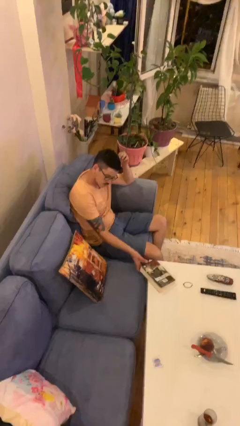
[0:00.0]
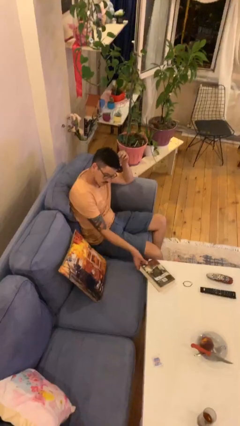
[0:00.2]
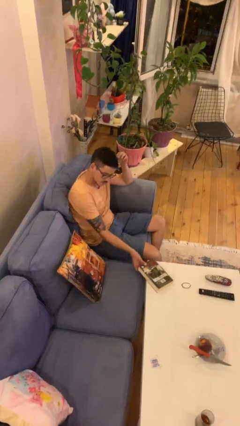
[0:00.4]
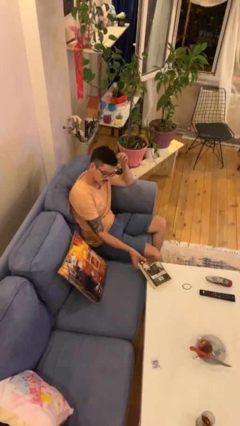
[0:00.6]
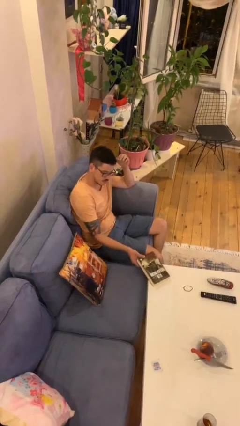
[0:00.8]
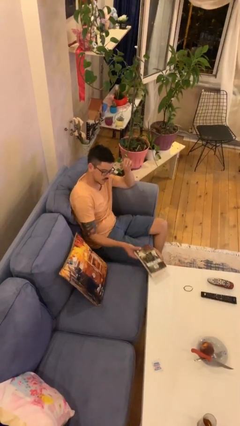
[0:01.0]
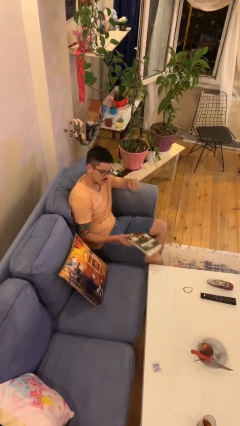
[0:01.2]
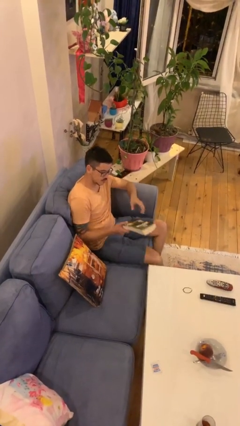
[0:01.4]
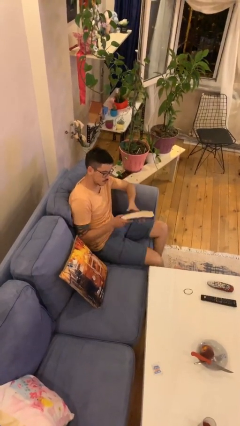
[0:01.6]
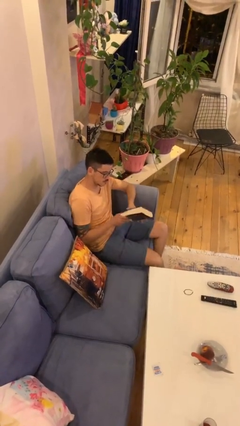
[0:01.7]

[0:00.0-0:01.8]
person picks up object from table

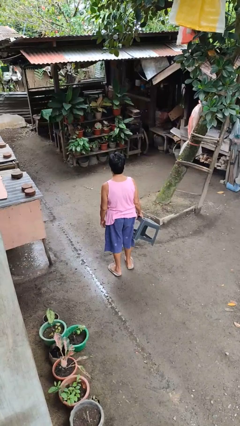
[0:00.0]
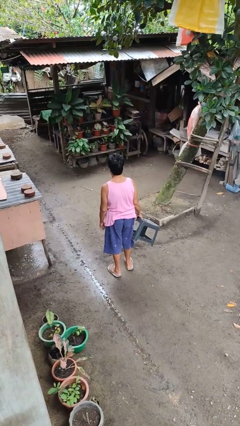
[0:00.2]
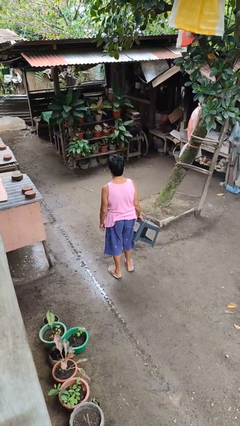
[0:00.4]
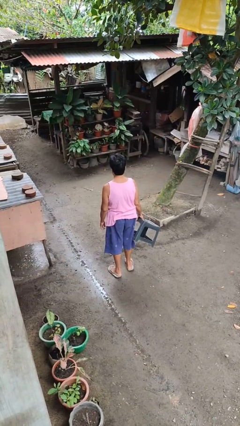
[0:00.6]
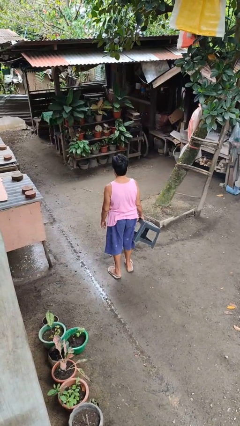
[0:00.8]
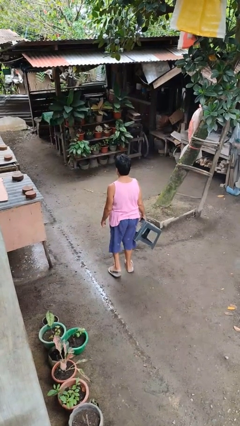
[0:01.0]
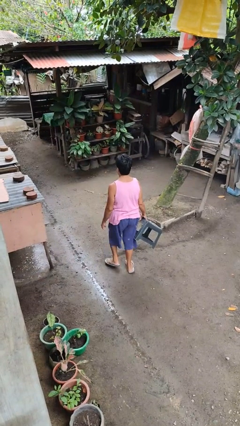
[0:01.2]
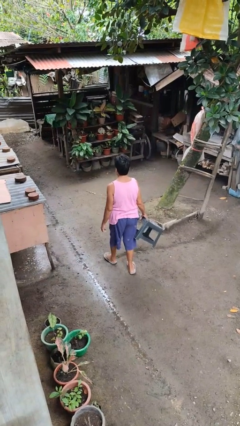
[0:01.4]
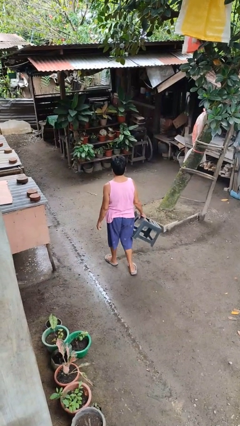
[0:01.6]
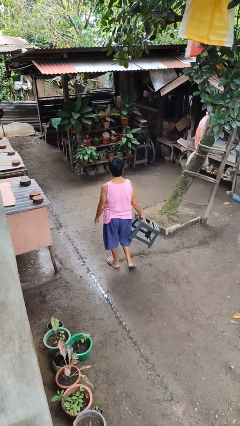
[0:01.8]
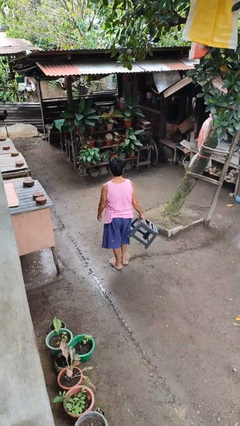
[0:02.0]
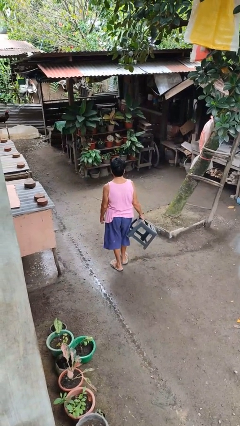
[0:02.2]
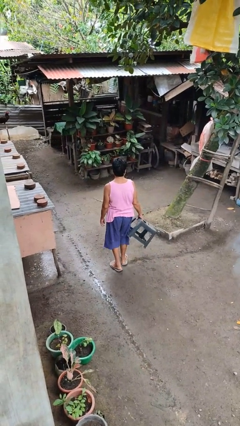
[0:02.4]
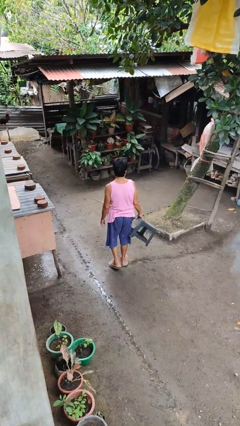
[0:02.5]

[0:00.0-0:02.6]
person carries furniture

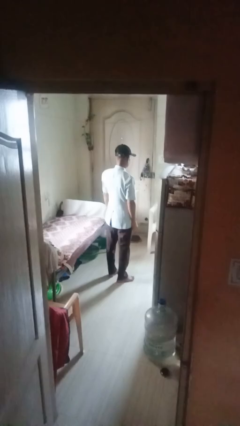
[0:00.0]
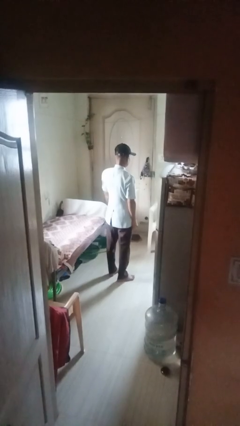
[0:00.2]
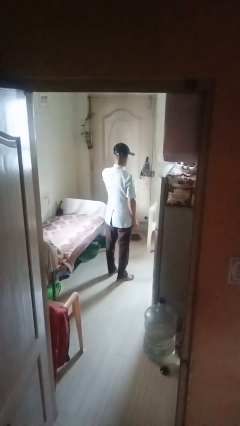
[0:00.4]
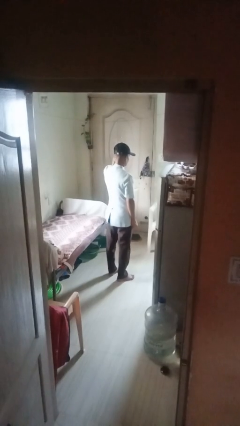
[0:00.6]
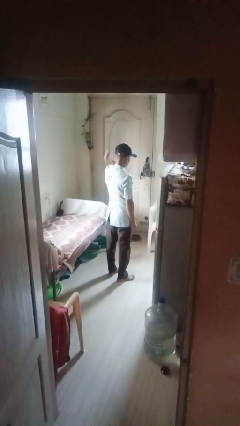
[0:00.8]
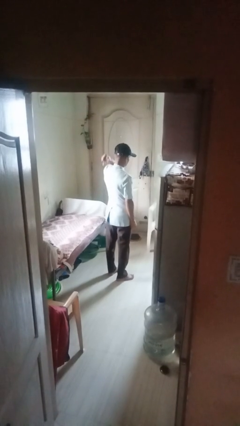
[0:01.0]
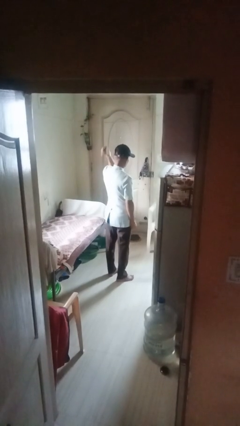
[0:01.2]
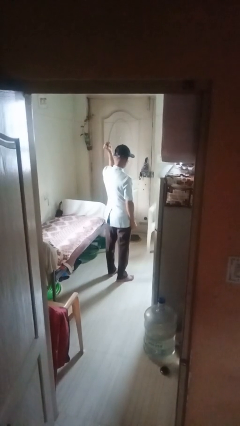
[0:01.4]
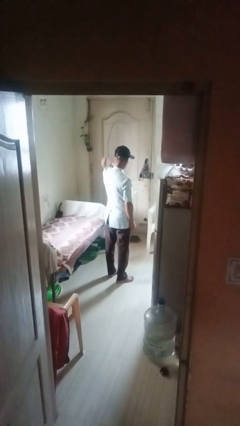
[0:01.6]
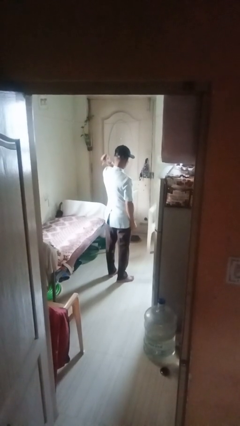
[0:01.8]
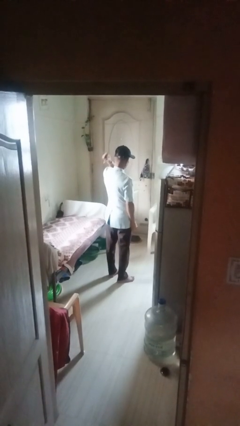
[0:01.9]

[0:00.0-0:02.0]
person gestures behind me

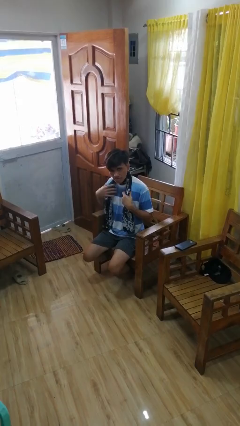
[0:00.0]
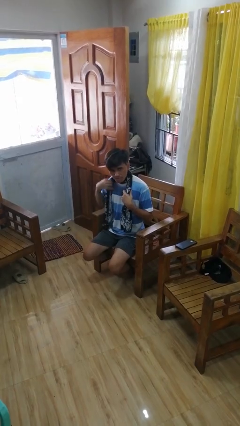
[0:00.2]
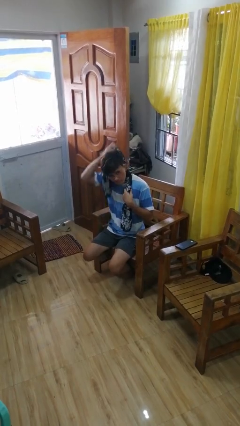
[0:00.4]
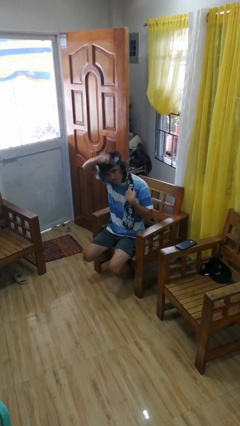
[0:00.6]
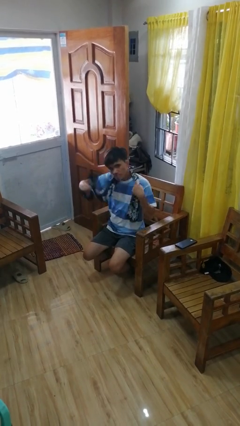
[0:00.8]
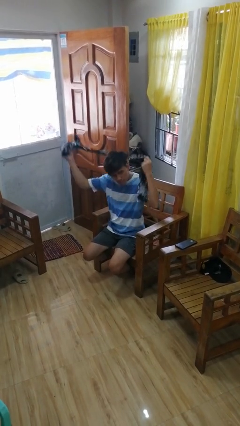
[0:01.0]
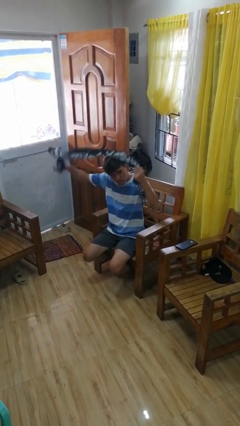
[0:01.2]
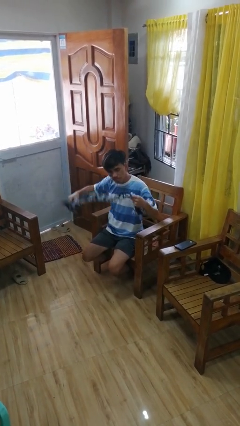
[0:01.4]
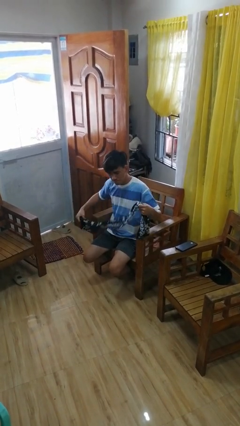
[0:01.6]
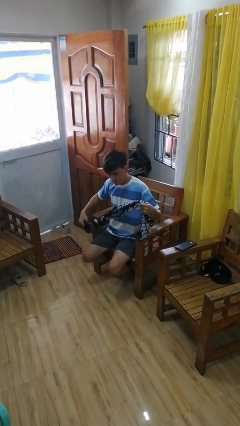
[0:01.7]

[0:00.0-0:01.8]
person takes off scarf

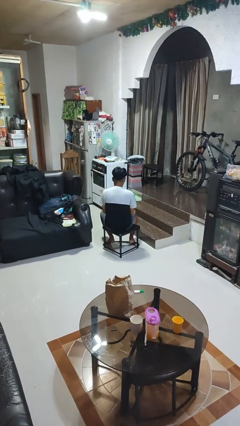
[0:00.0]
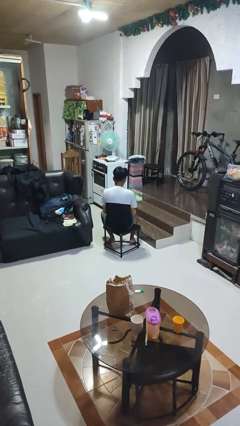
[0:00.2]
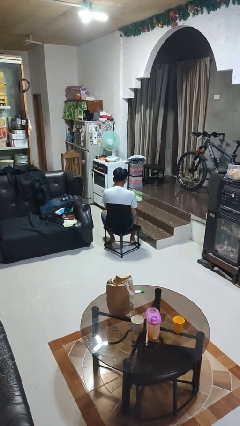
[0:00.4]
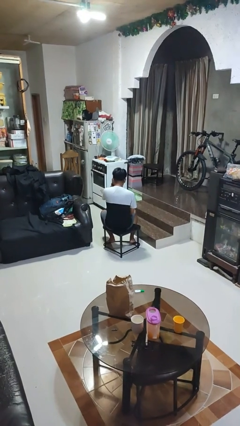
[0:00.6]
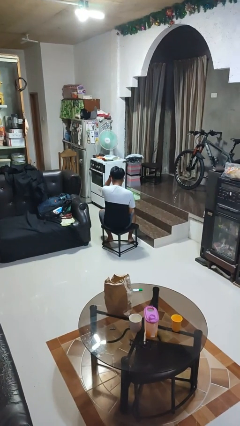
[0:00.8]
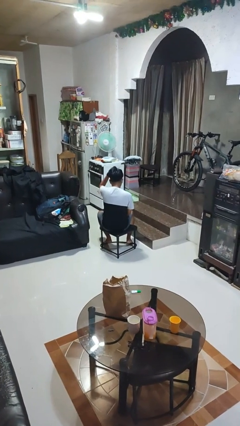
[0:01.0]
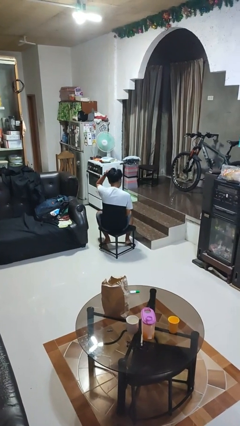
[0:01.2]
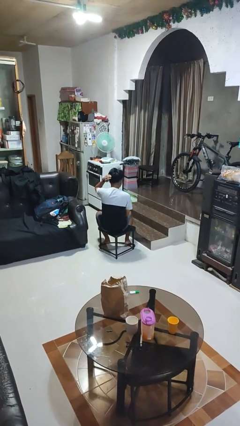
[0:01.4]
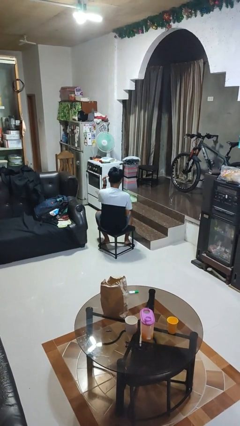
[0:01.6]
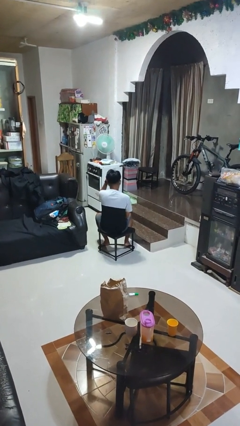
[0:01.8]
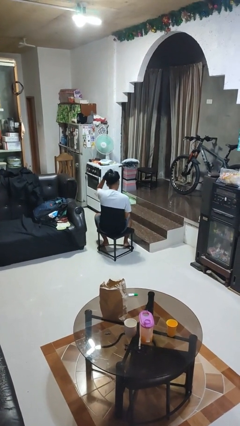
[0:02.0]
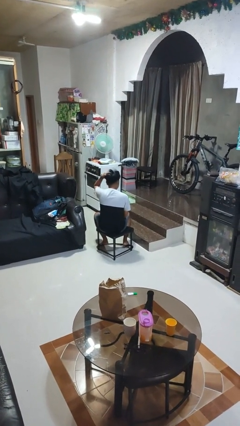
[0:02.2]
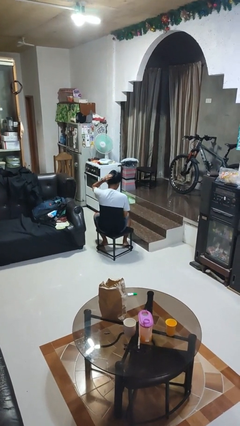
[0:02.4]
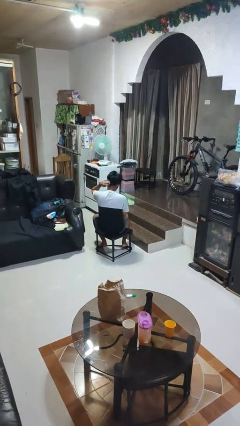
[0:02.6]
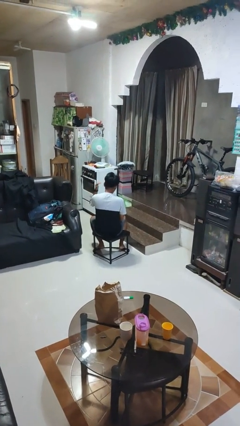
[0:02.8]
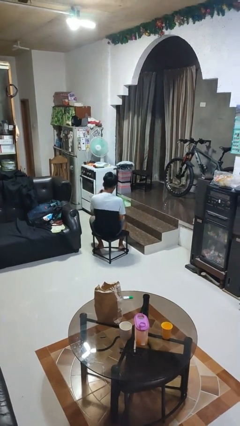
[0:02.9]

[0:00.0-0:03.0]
person strokes hair

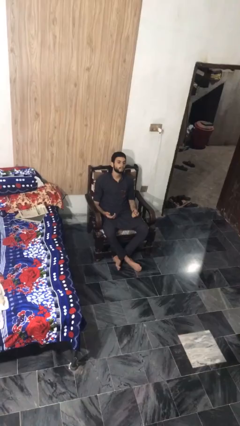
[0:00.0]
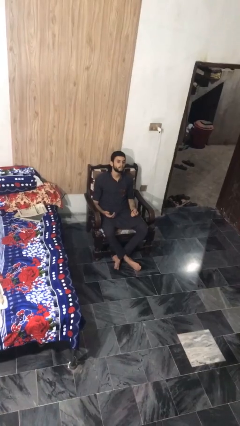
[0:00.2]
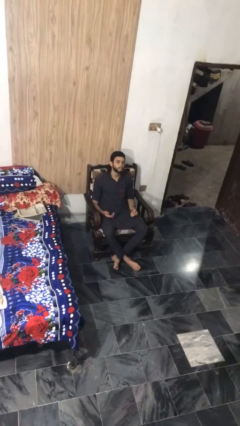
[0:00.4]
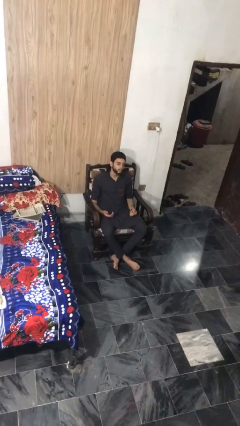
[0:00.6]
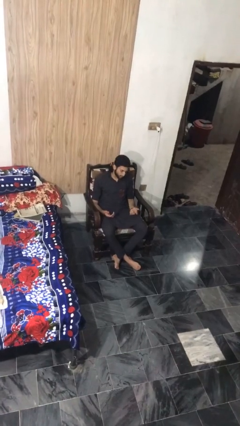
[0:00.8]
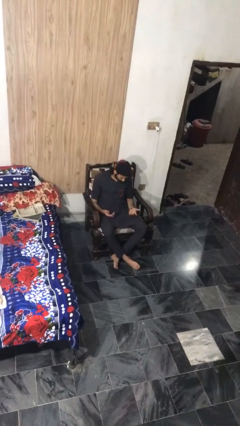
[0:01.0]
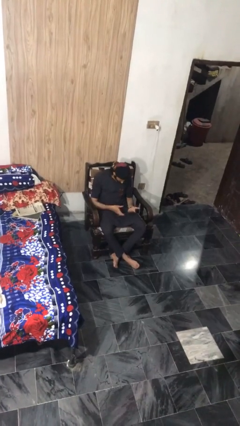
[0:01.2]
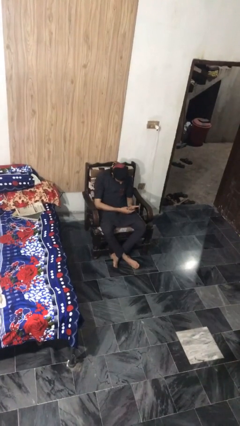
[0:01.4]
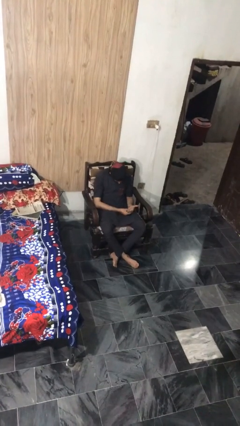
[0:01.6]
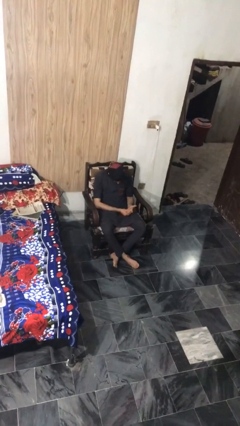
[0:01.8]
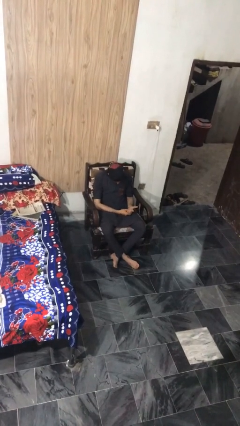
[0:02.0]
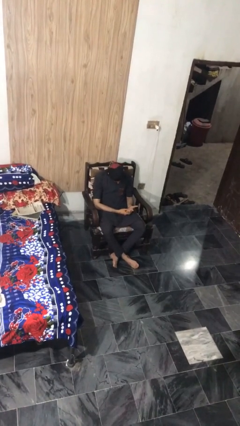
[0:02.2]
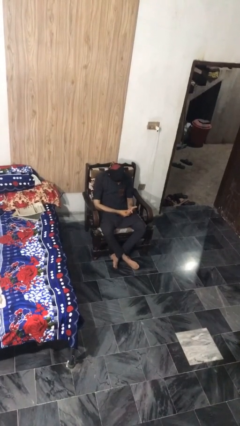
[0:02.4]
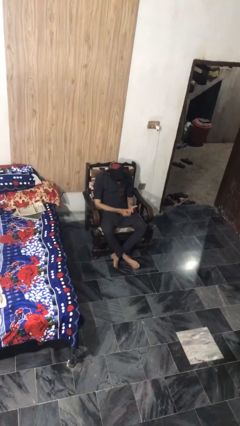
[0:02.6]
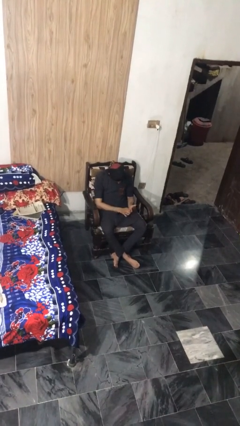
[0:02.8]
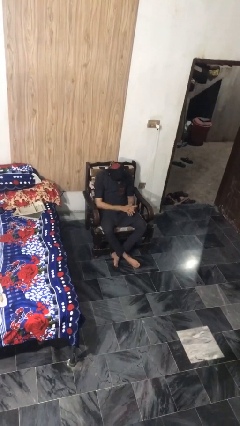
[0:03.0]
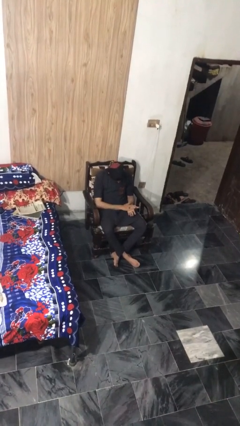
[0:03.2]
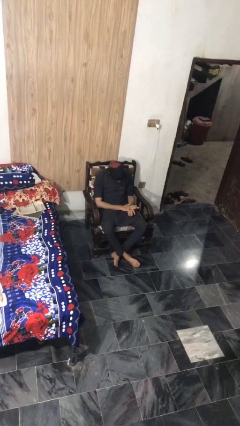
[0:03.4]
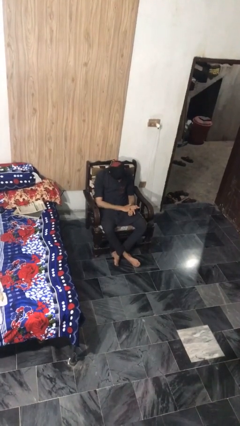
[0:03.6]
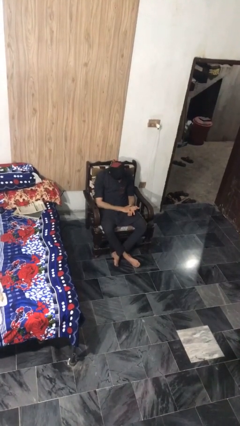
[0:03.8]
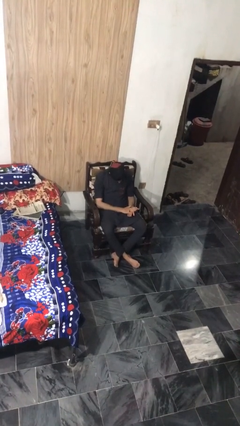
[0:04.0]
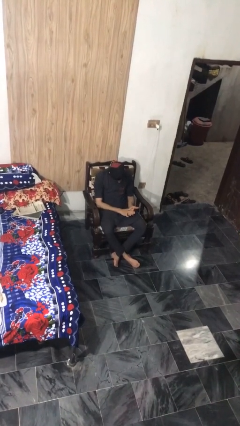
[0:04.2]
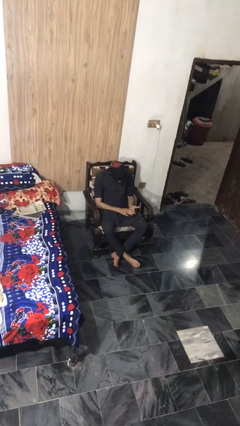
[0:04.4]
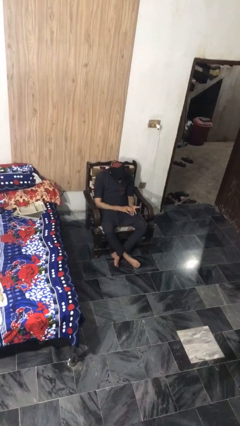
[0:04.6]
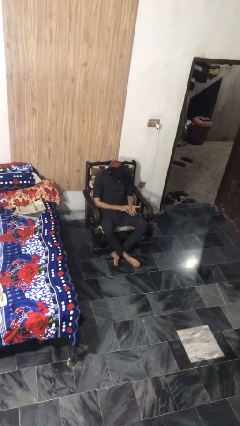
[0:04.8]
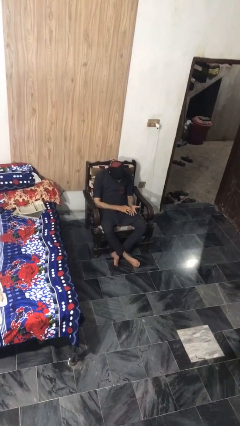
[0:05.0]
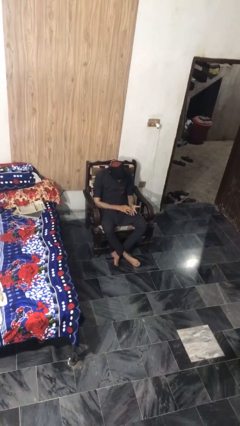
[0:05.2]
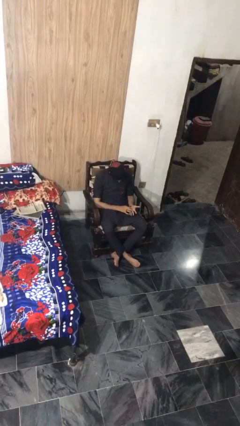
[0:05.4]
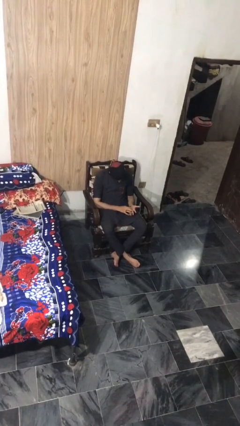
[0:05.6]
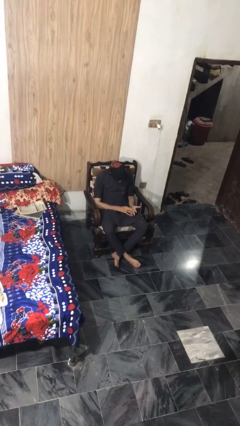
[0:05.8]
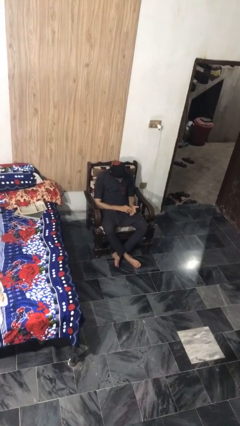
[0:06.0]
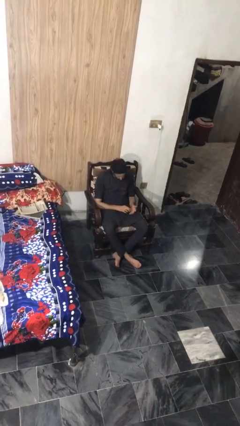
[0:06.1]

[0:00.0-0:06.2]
person looks at hands in lap
